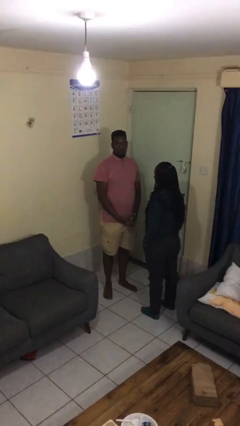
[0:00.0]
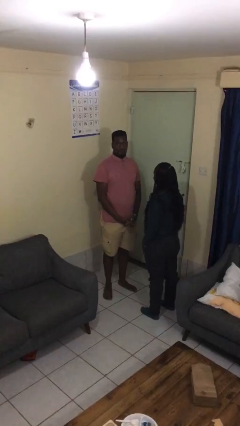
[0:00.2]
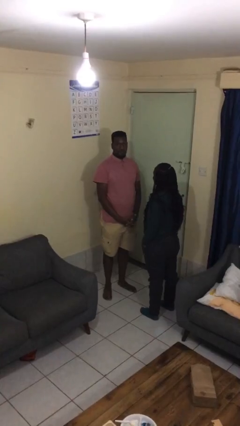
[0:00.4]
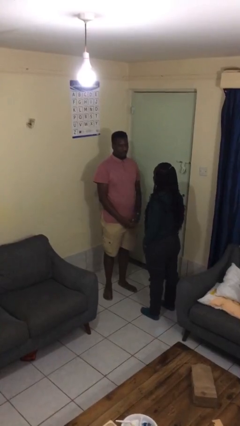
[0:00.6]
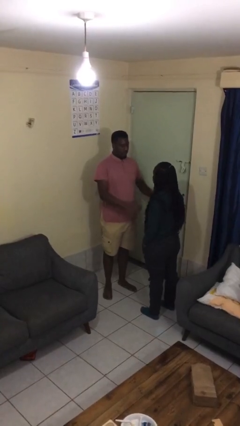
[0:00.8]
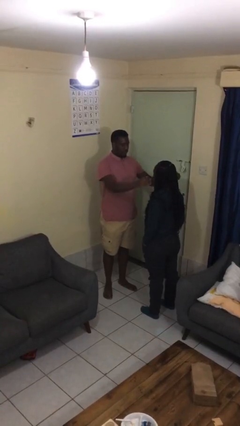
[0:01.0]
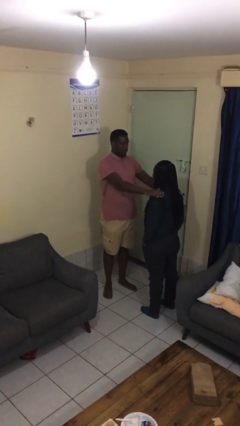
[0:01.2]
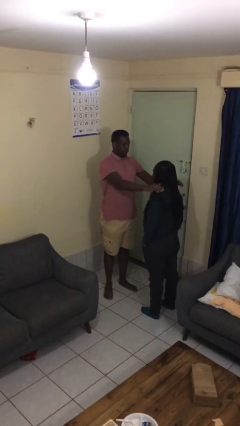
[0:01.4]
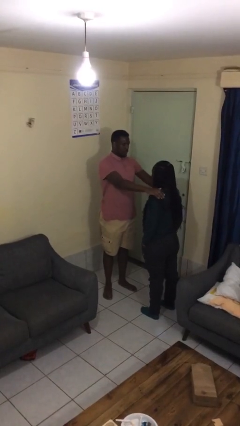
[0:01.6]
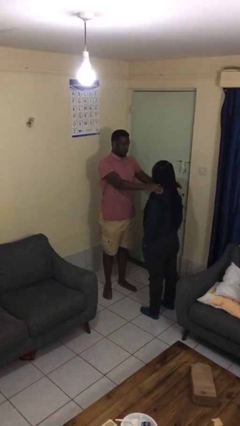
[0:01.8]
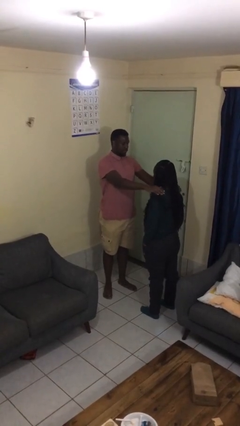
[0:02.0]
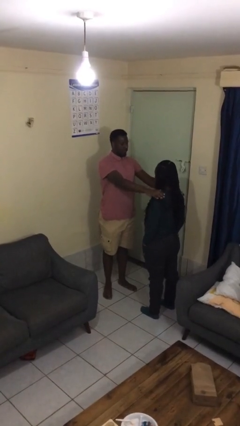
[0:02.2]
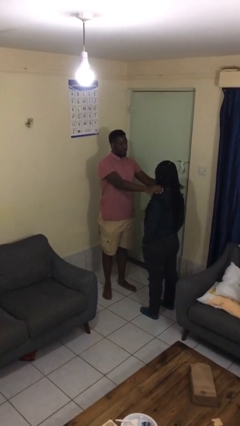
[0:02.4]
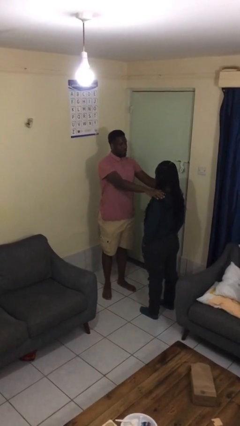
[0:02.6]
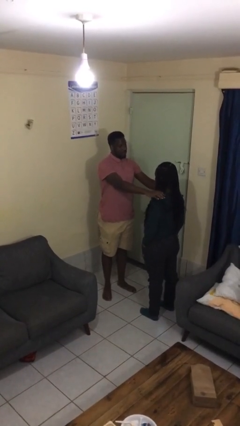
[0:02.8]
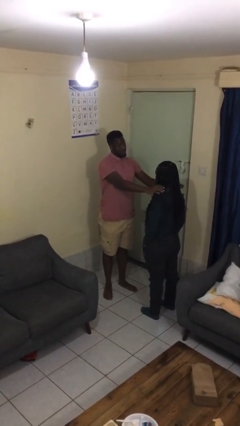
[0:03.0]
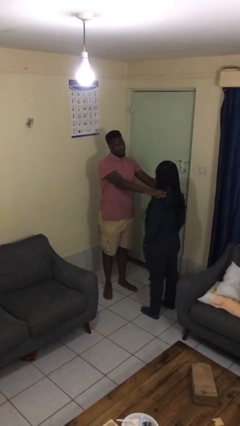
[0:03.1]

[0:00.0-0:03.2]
person pounds shoulders of person

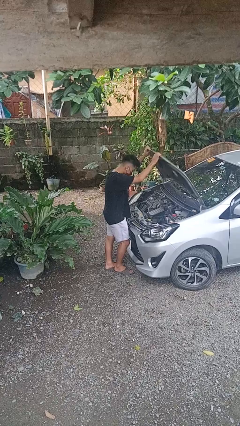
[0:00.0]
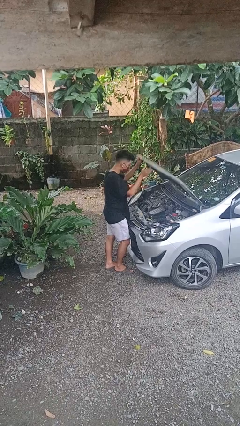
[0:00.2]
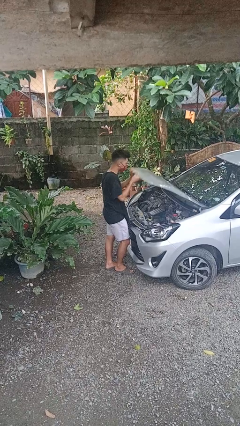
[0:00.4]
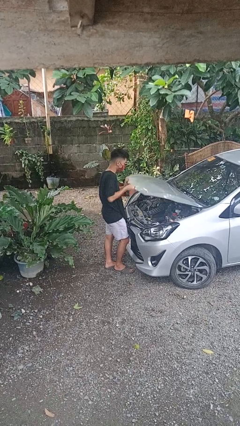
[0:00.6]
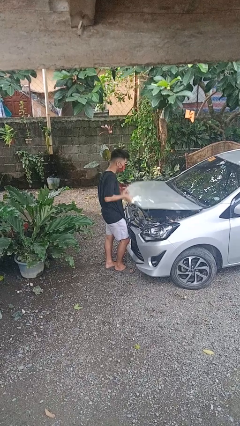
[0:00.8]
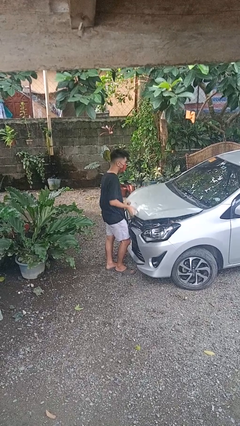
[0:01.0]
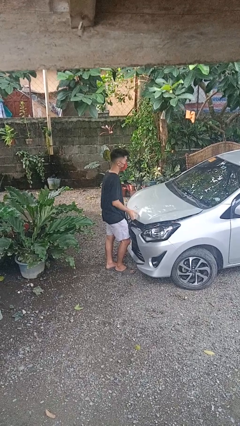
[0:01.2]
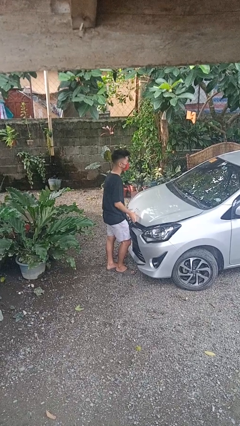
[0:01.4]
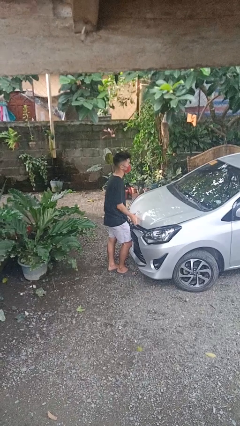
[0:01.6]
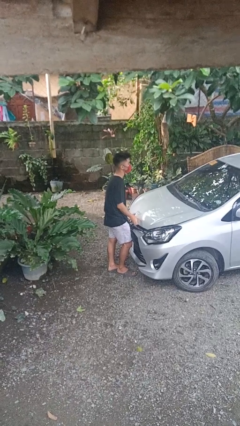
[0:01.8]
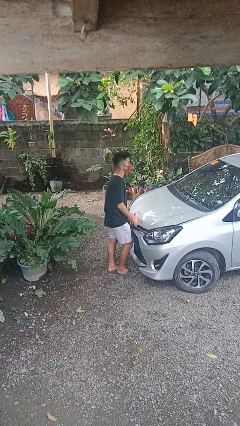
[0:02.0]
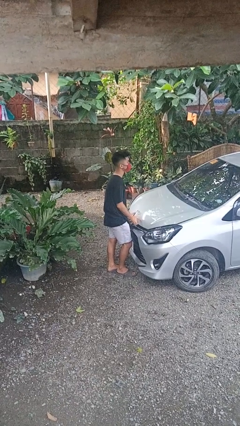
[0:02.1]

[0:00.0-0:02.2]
person closes car hood

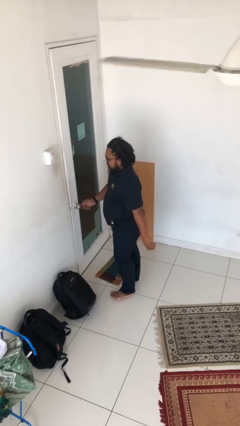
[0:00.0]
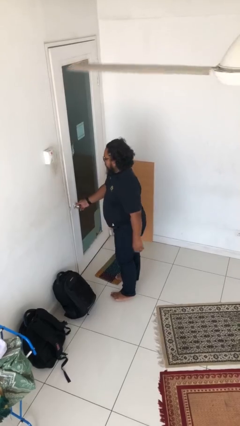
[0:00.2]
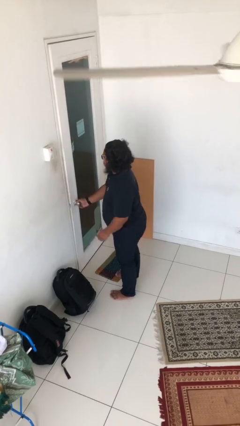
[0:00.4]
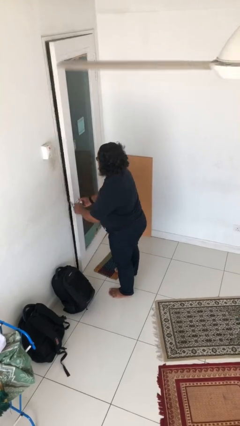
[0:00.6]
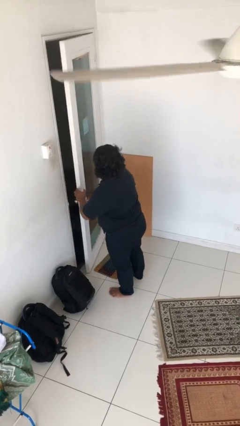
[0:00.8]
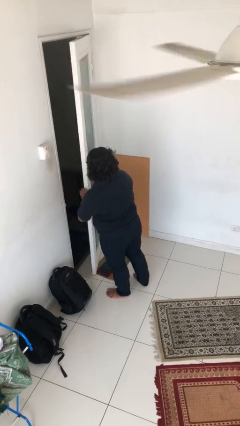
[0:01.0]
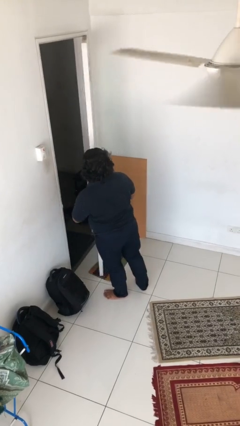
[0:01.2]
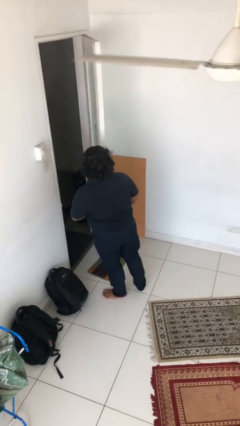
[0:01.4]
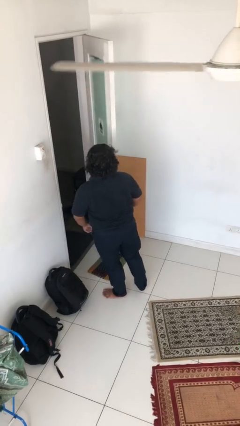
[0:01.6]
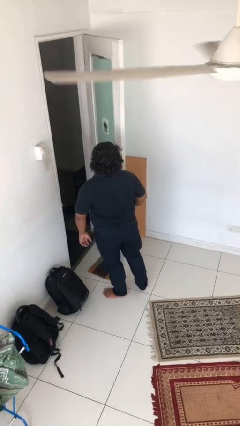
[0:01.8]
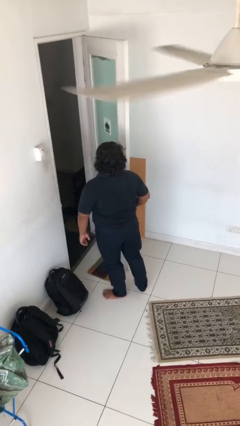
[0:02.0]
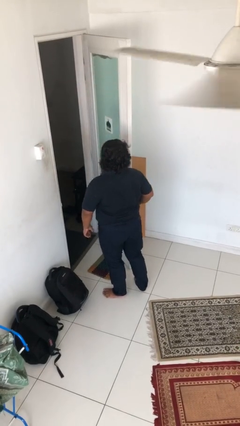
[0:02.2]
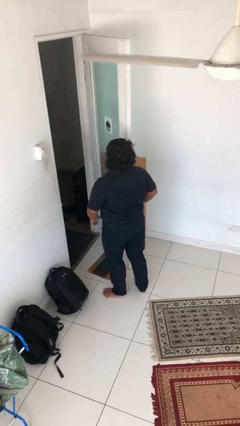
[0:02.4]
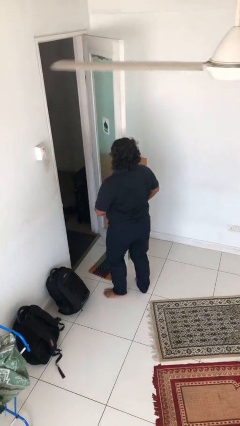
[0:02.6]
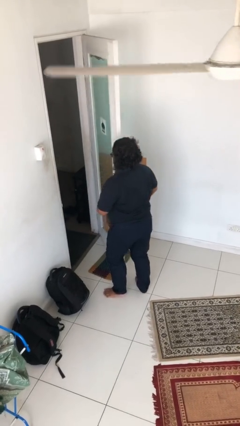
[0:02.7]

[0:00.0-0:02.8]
person opens facility door

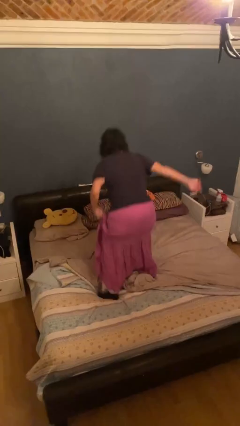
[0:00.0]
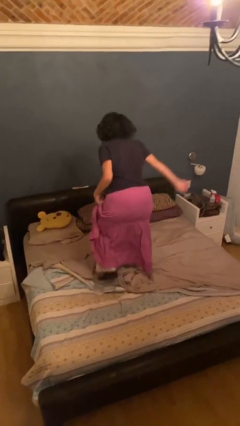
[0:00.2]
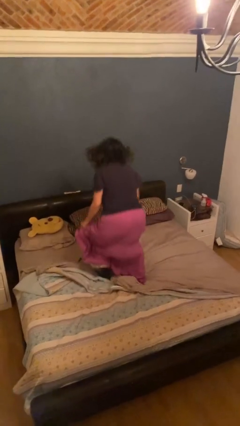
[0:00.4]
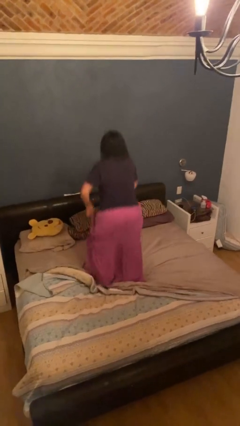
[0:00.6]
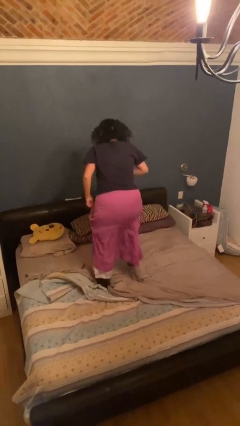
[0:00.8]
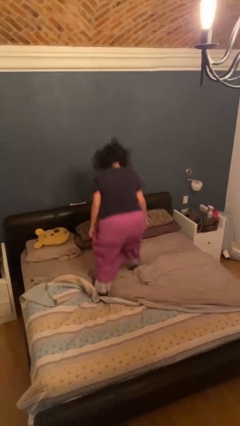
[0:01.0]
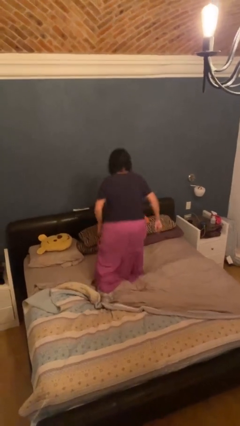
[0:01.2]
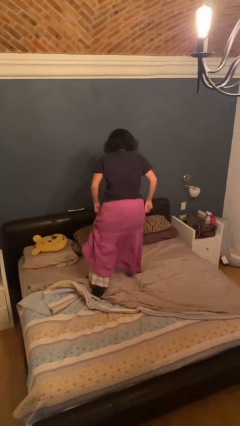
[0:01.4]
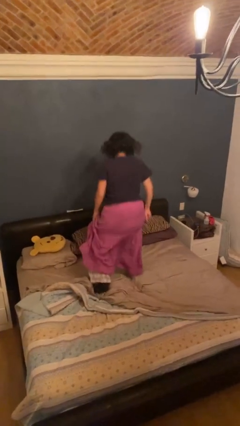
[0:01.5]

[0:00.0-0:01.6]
person jumps on bed

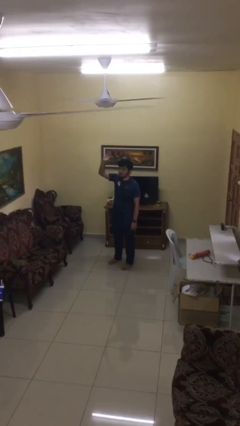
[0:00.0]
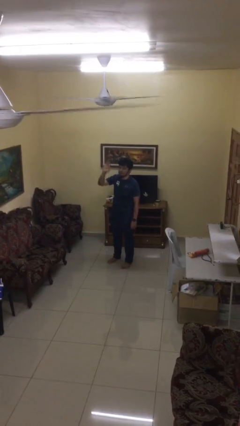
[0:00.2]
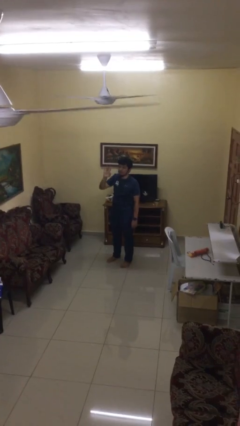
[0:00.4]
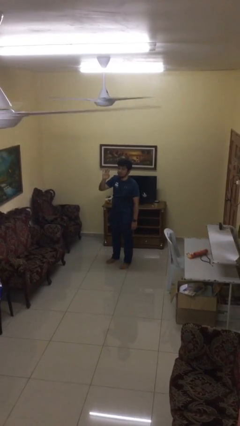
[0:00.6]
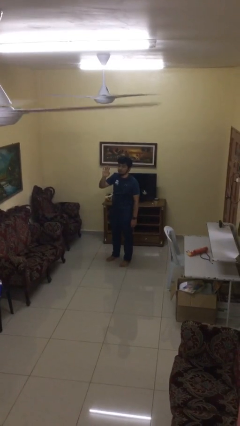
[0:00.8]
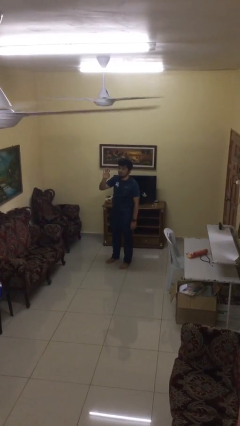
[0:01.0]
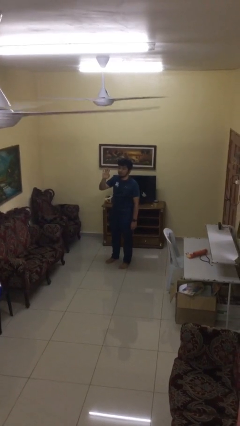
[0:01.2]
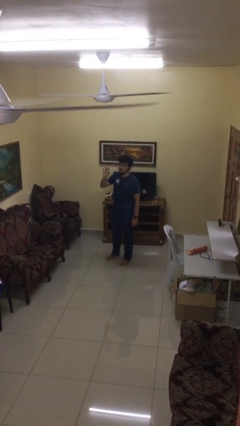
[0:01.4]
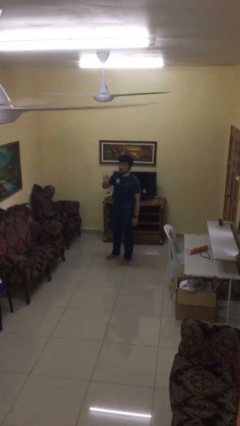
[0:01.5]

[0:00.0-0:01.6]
person gestures lower hand

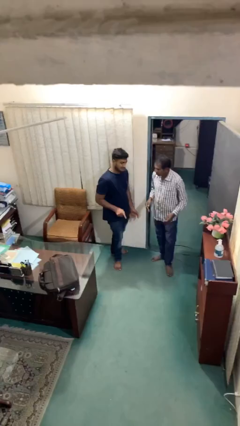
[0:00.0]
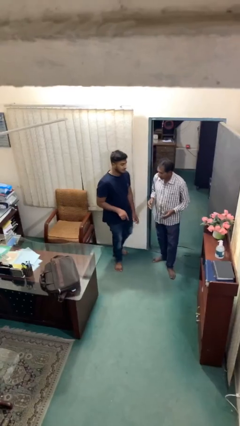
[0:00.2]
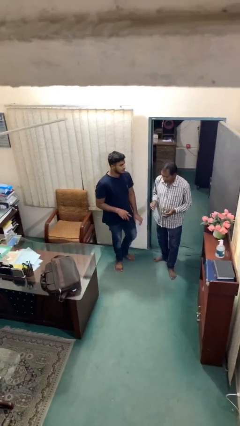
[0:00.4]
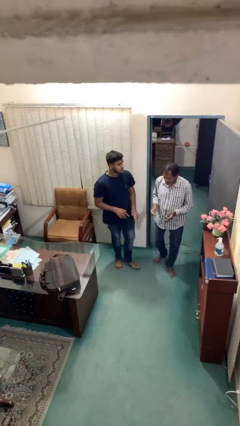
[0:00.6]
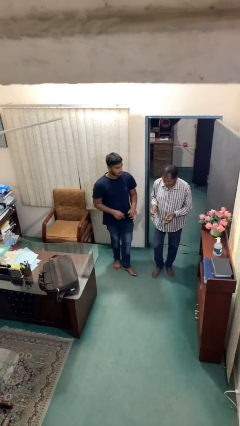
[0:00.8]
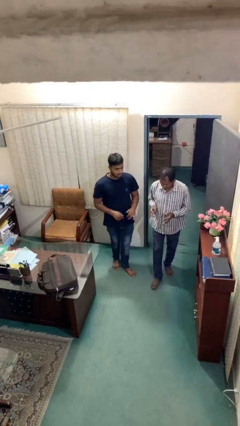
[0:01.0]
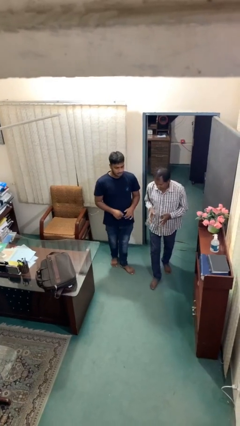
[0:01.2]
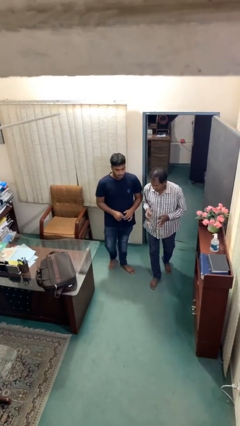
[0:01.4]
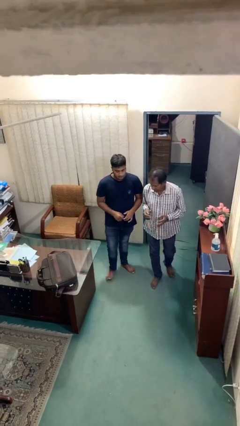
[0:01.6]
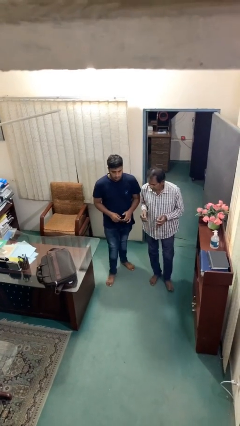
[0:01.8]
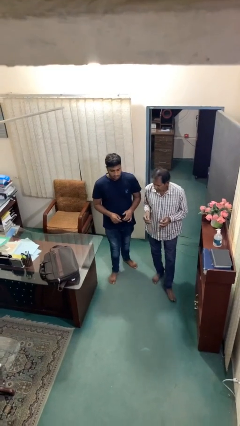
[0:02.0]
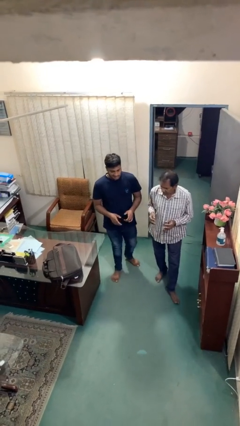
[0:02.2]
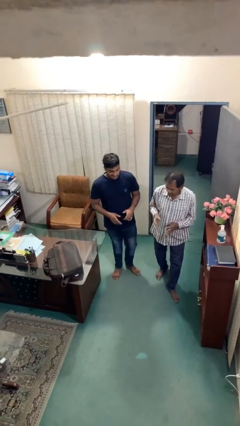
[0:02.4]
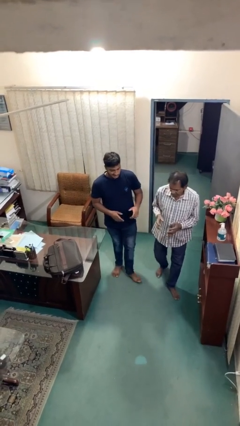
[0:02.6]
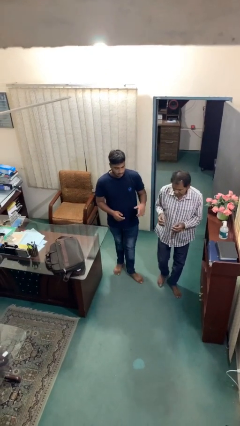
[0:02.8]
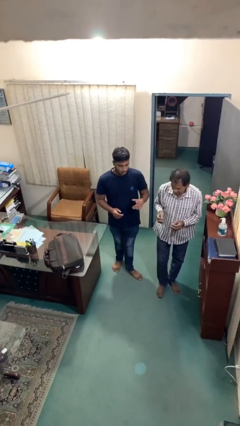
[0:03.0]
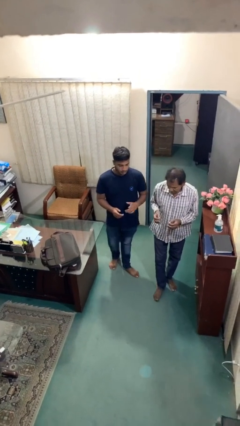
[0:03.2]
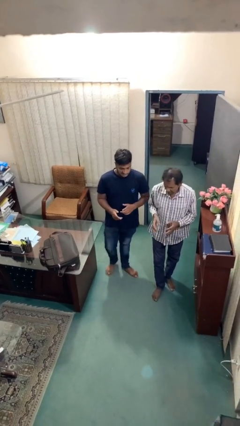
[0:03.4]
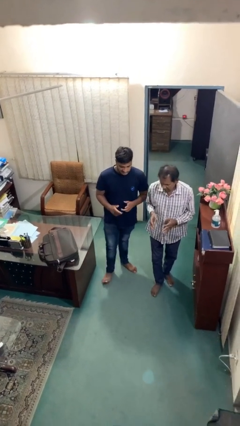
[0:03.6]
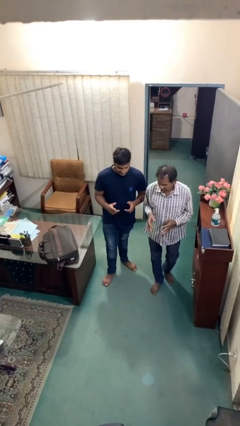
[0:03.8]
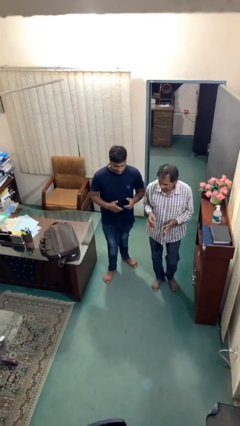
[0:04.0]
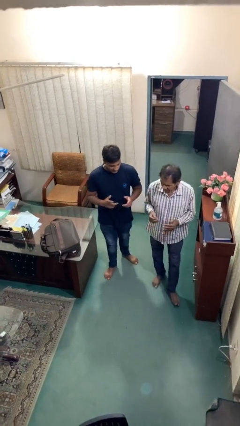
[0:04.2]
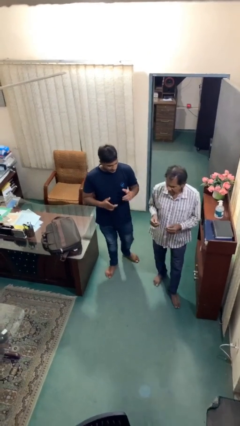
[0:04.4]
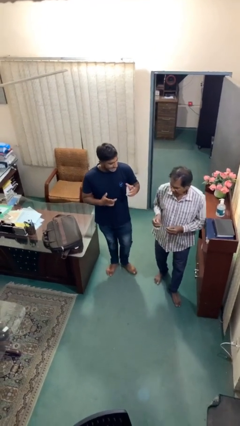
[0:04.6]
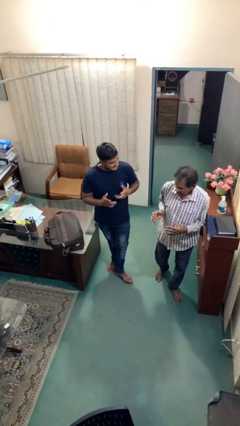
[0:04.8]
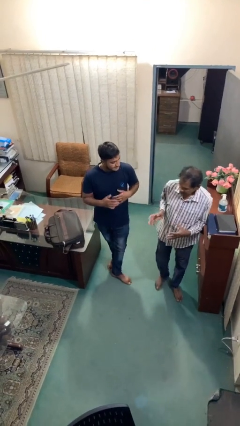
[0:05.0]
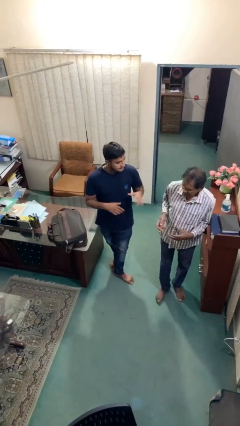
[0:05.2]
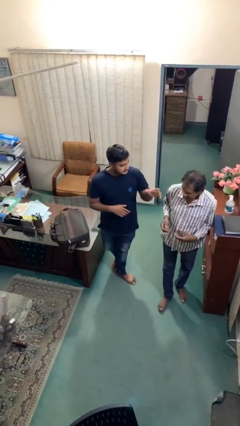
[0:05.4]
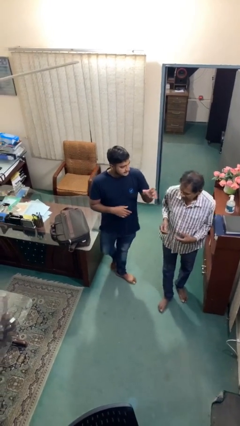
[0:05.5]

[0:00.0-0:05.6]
person talks to person
